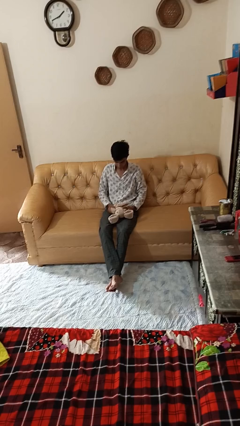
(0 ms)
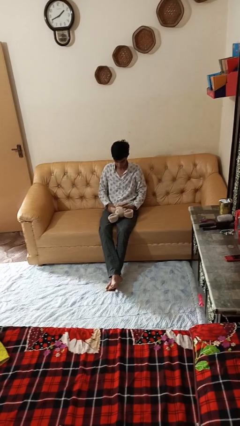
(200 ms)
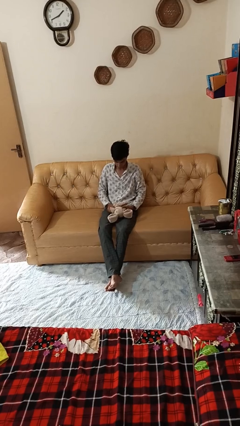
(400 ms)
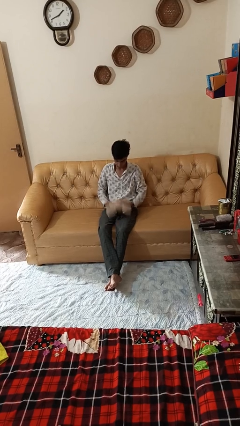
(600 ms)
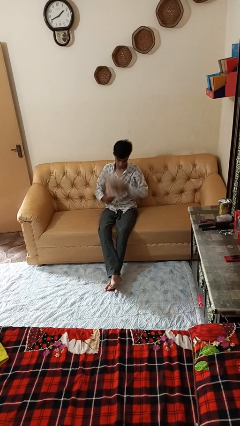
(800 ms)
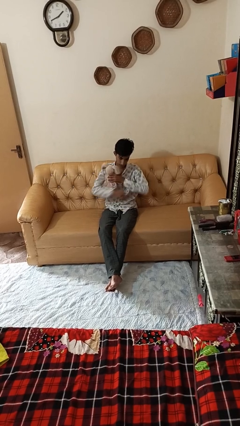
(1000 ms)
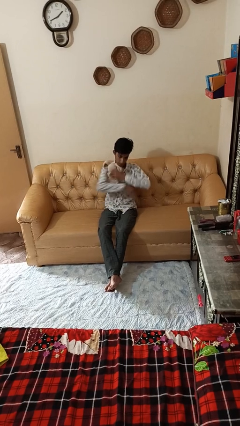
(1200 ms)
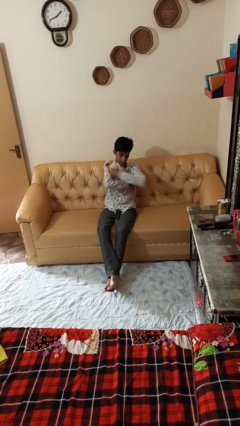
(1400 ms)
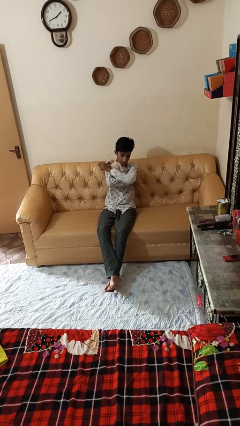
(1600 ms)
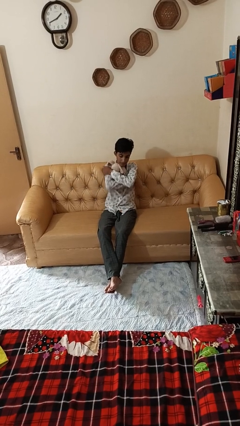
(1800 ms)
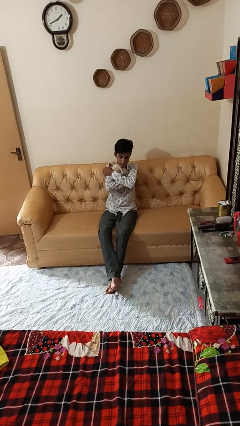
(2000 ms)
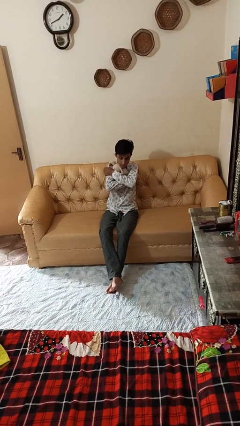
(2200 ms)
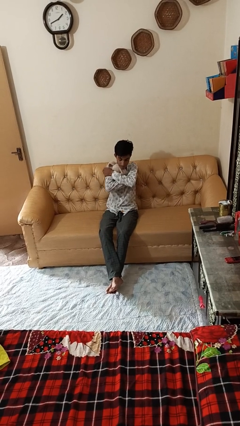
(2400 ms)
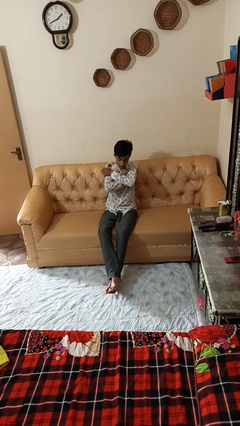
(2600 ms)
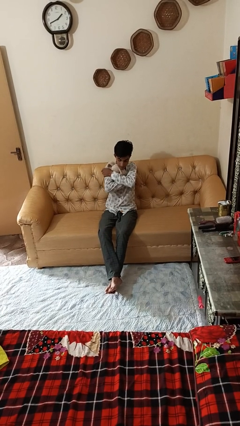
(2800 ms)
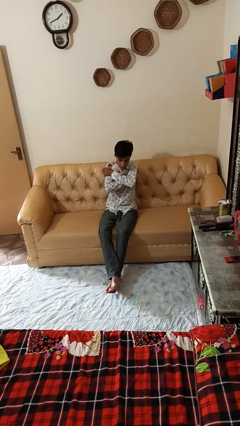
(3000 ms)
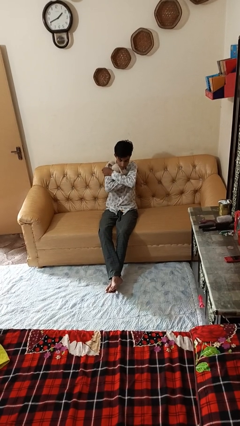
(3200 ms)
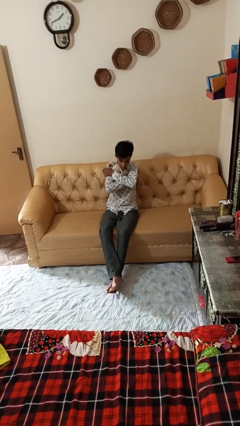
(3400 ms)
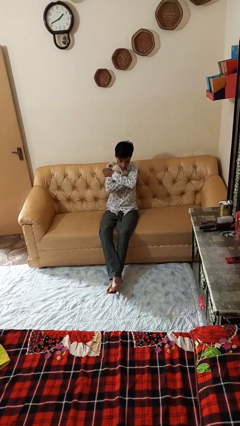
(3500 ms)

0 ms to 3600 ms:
person hugs stuffed animal

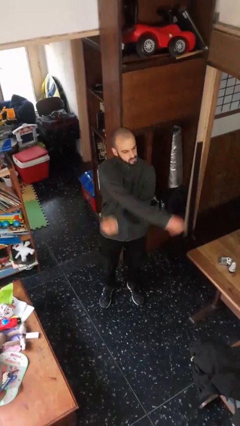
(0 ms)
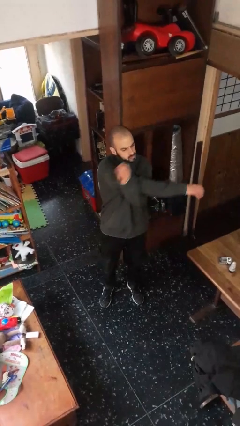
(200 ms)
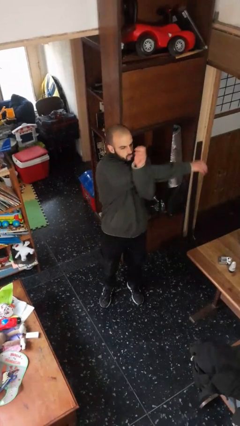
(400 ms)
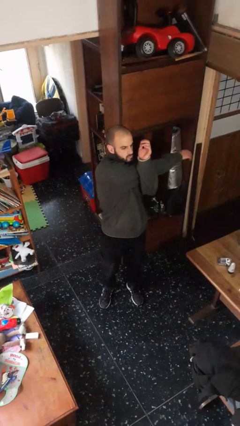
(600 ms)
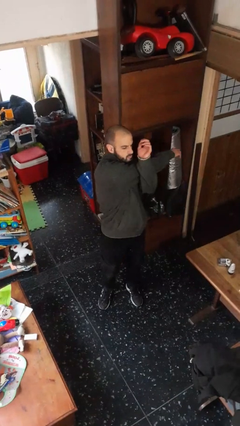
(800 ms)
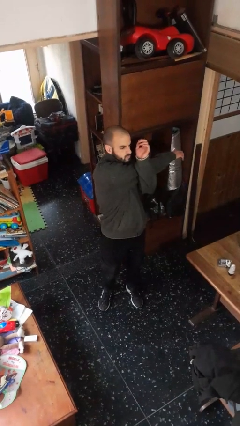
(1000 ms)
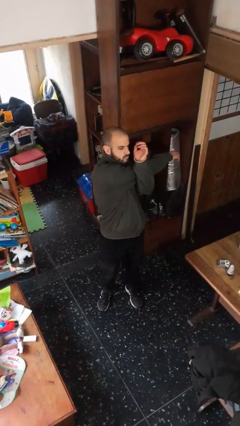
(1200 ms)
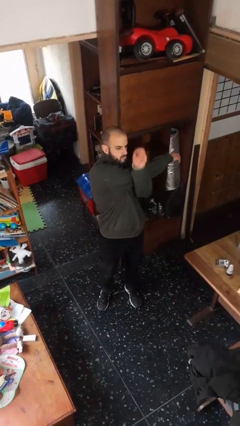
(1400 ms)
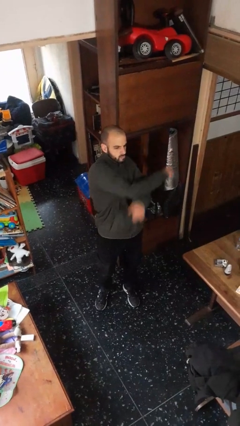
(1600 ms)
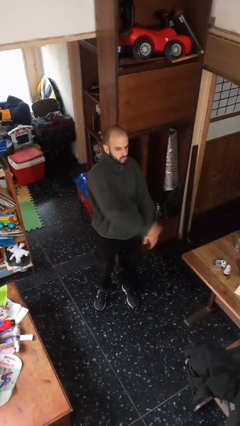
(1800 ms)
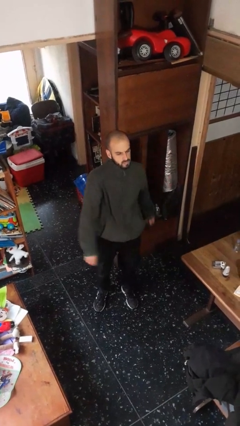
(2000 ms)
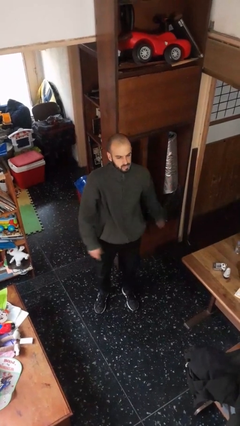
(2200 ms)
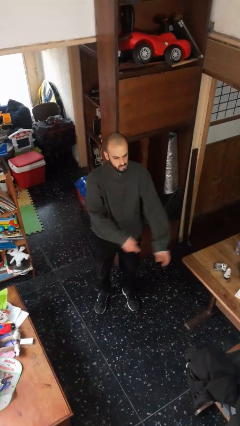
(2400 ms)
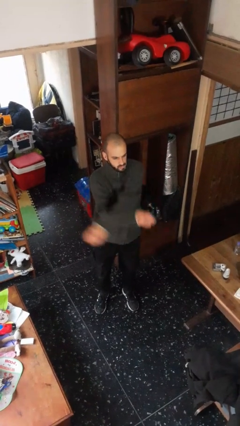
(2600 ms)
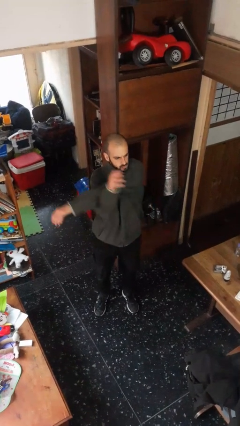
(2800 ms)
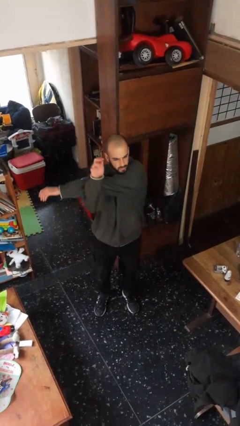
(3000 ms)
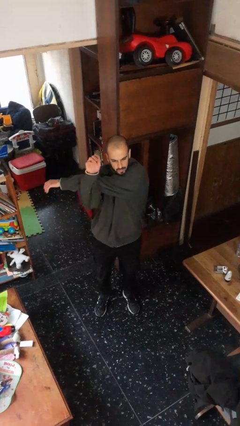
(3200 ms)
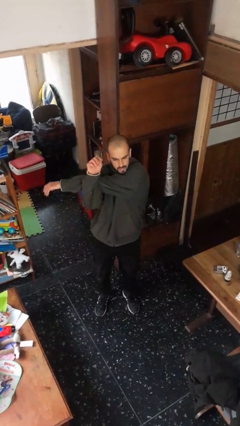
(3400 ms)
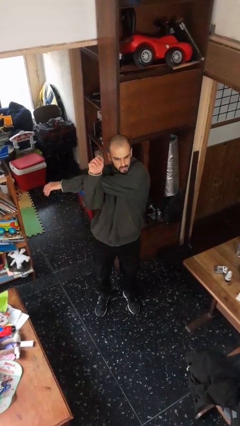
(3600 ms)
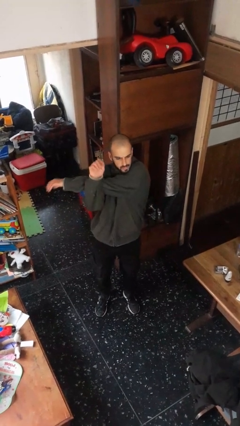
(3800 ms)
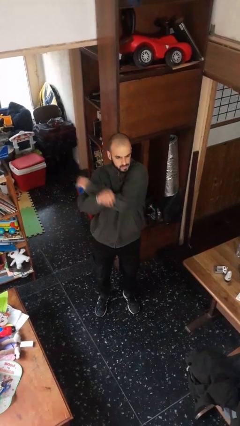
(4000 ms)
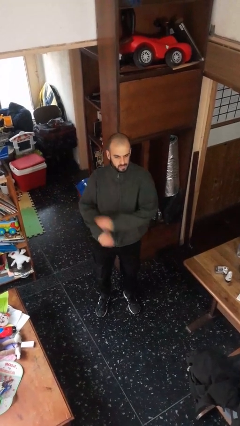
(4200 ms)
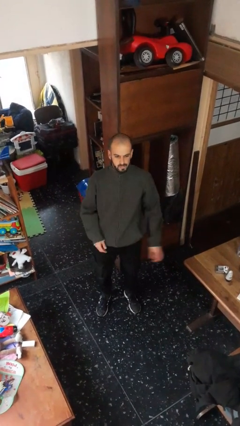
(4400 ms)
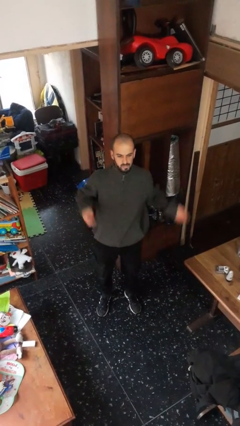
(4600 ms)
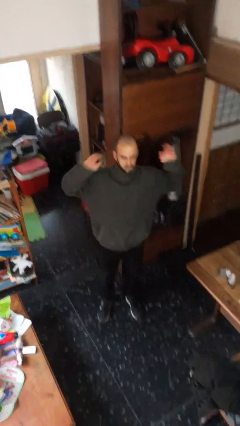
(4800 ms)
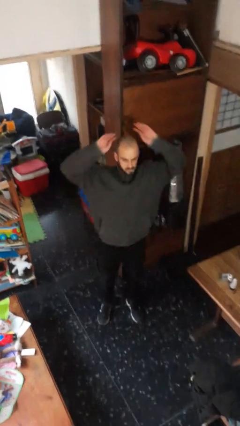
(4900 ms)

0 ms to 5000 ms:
person stretches arms to side

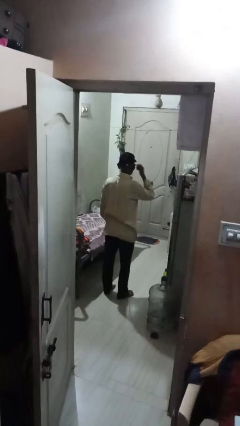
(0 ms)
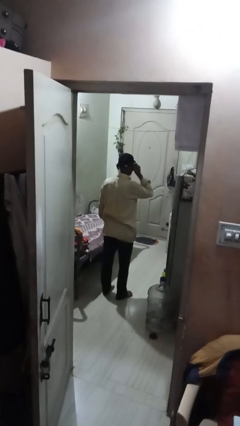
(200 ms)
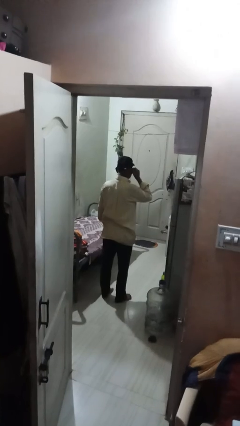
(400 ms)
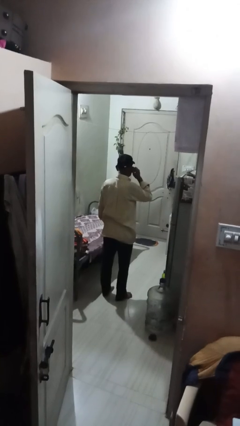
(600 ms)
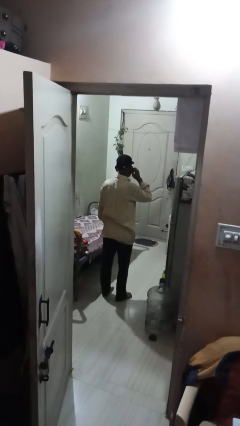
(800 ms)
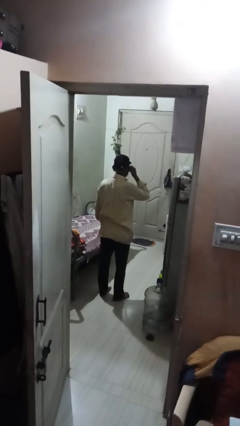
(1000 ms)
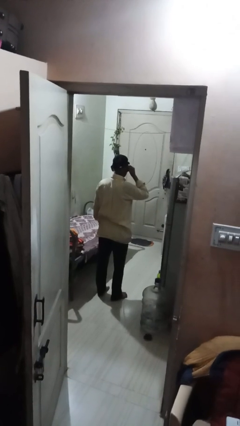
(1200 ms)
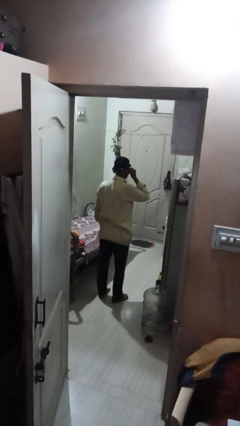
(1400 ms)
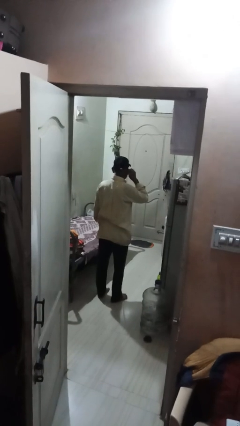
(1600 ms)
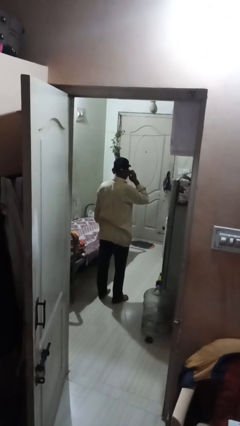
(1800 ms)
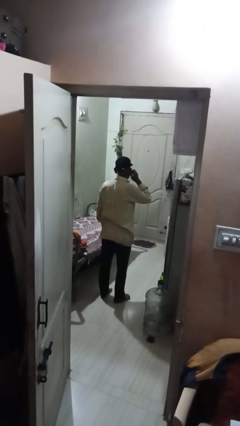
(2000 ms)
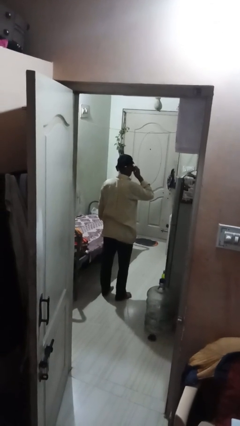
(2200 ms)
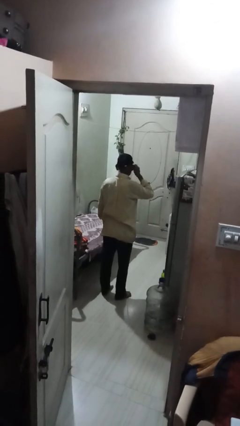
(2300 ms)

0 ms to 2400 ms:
person touches earlobe

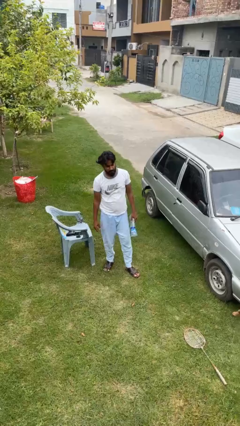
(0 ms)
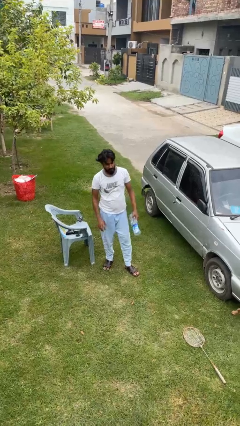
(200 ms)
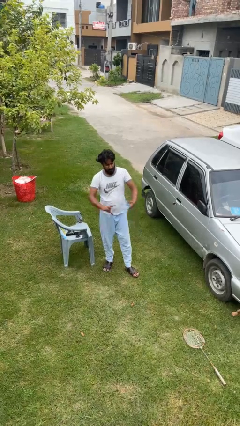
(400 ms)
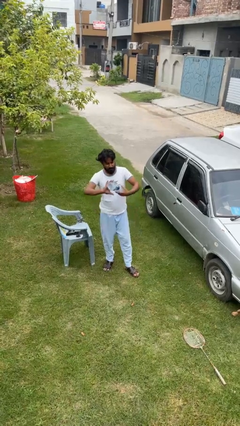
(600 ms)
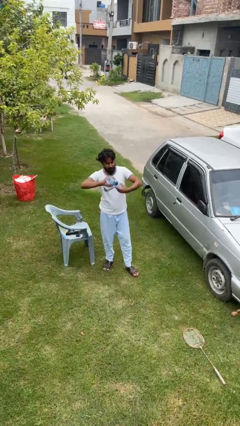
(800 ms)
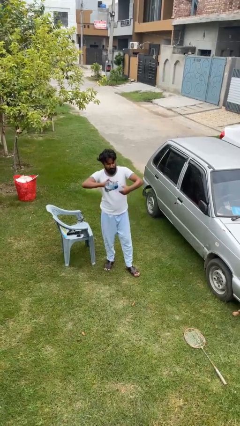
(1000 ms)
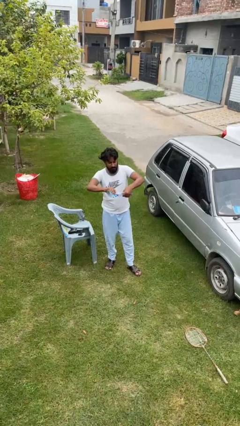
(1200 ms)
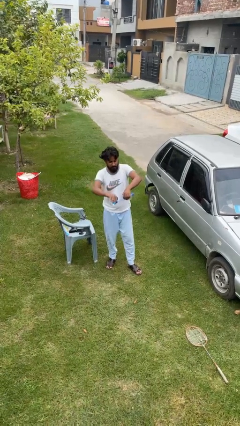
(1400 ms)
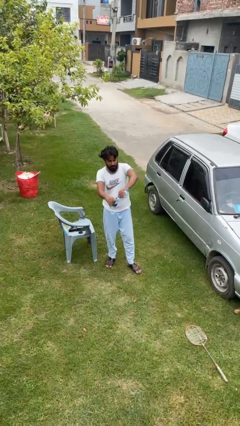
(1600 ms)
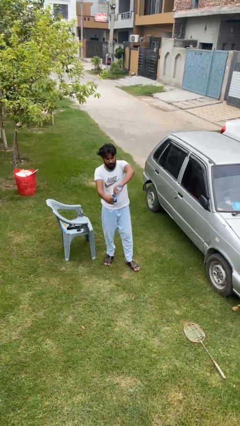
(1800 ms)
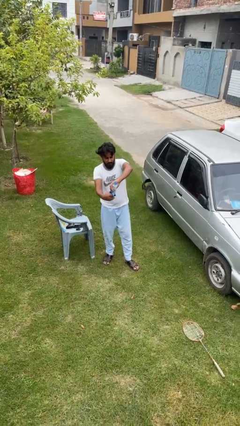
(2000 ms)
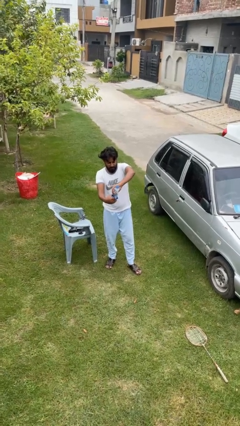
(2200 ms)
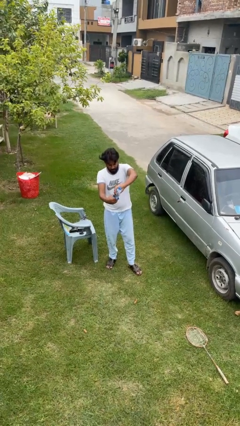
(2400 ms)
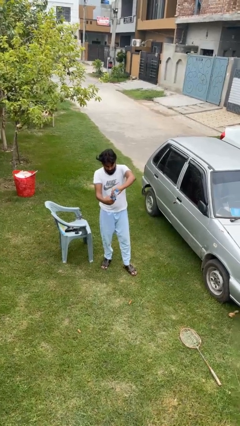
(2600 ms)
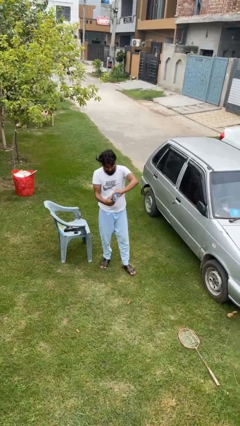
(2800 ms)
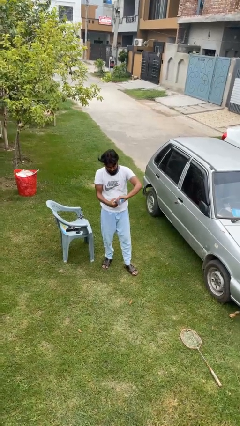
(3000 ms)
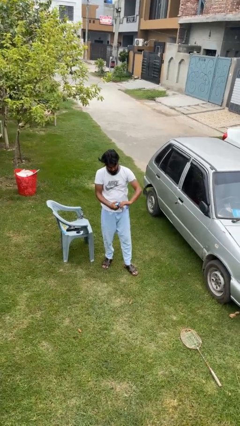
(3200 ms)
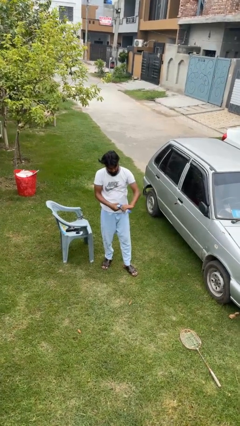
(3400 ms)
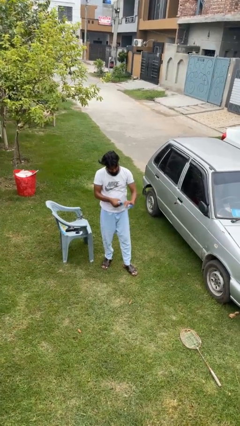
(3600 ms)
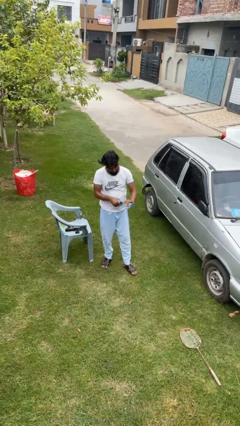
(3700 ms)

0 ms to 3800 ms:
person squeezes object

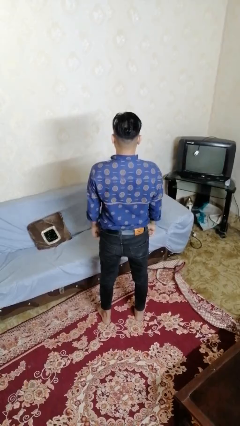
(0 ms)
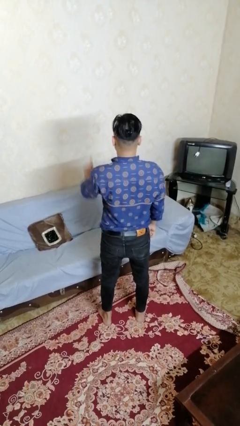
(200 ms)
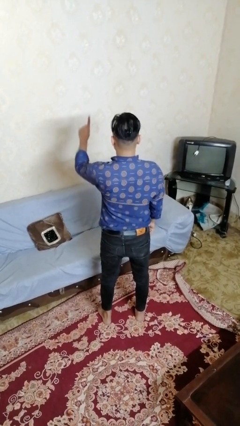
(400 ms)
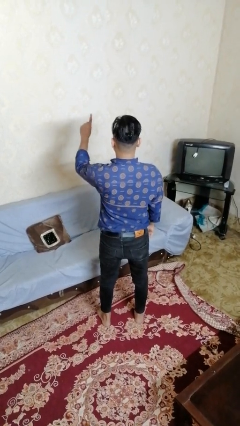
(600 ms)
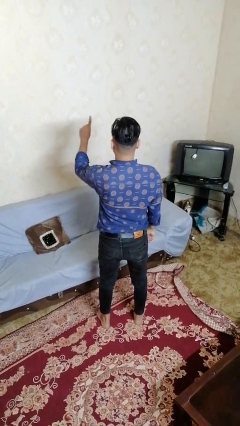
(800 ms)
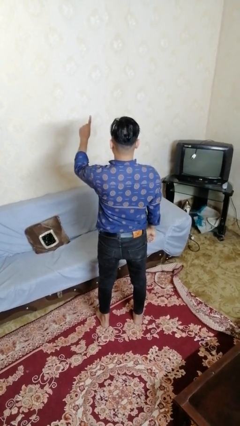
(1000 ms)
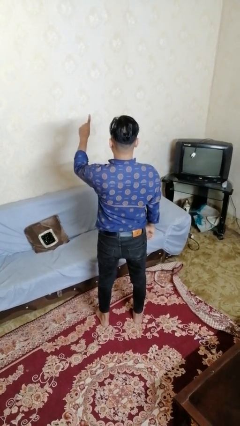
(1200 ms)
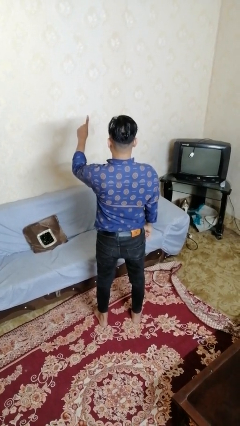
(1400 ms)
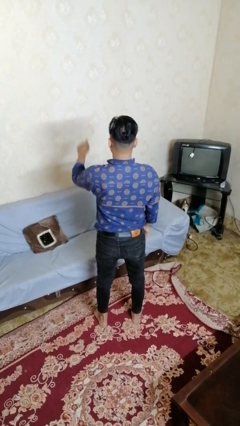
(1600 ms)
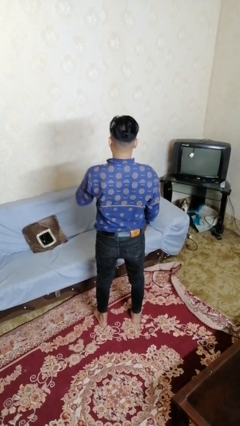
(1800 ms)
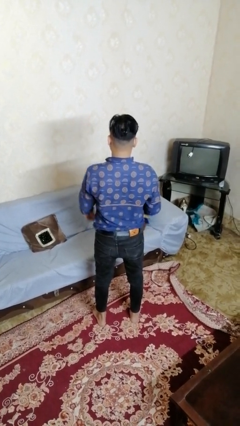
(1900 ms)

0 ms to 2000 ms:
person gestures number one

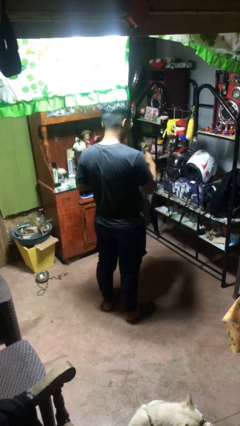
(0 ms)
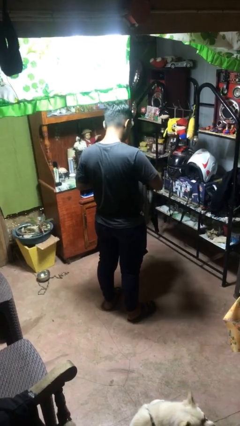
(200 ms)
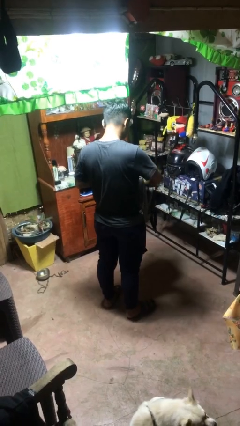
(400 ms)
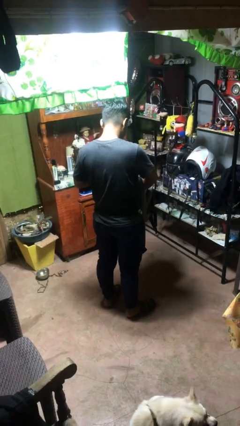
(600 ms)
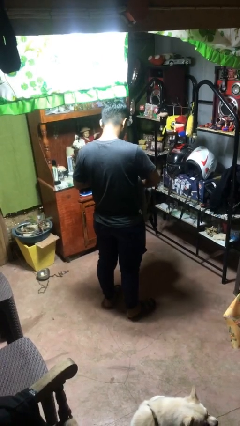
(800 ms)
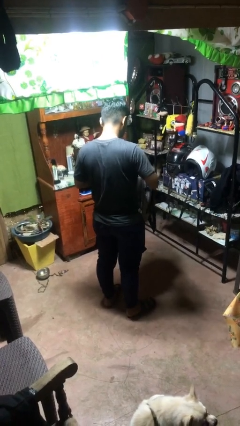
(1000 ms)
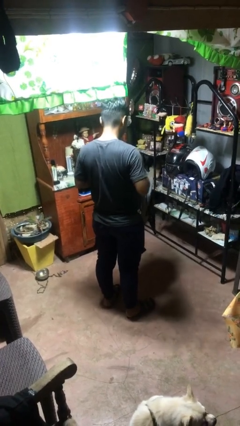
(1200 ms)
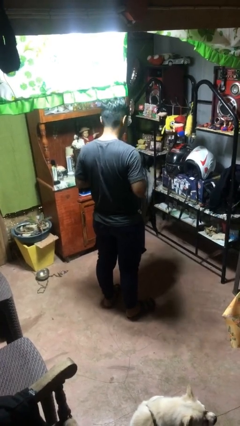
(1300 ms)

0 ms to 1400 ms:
person puts object into bag
